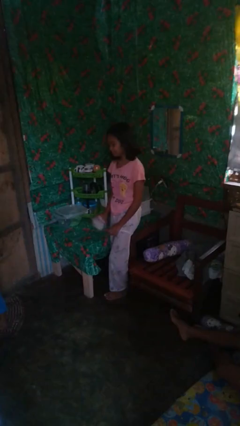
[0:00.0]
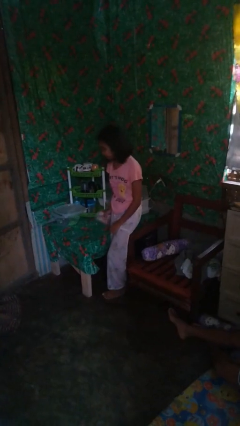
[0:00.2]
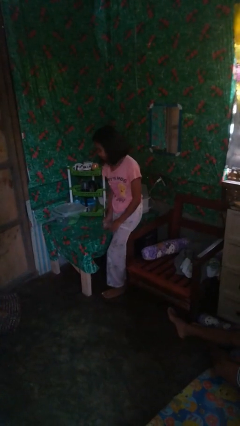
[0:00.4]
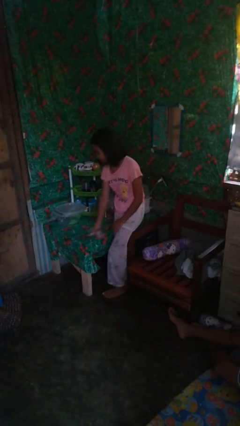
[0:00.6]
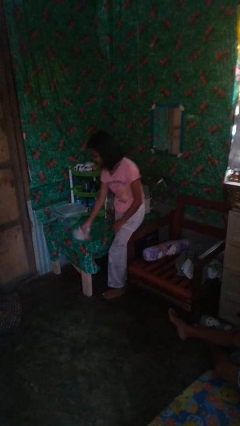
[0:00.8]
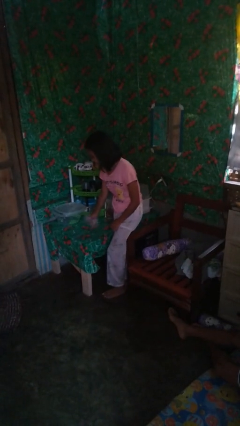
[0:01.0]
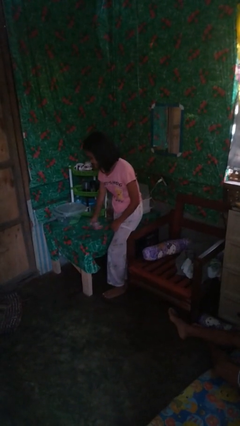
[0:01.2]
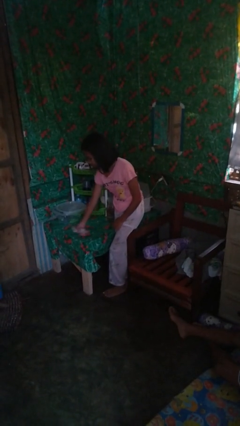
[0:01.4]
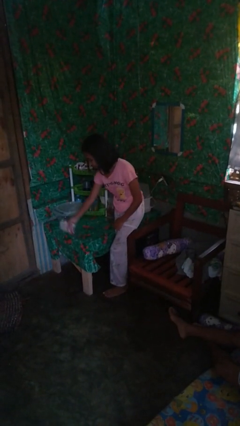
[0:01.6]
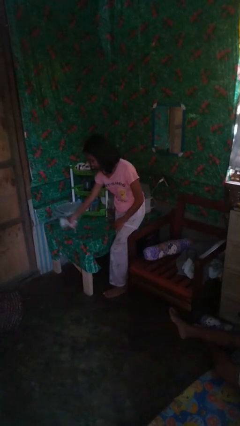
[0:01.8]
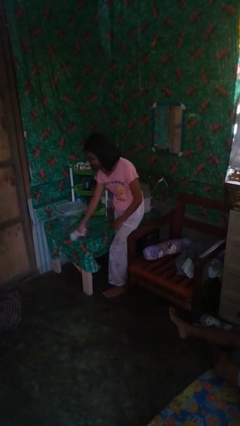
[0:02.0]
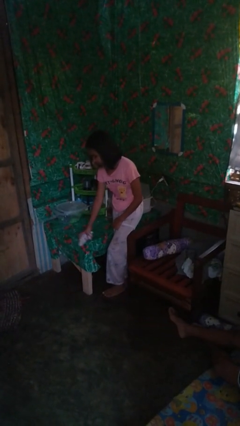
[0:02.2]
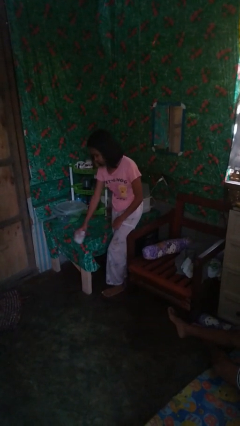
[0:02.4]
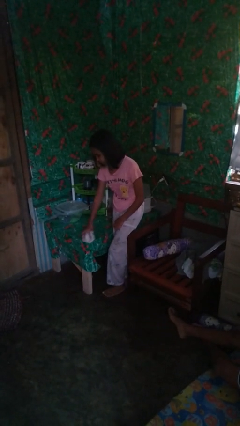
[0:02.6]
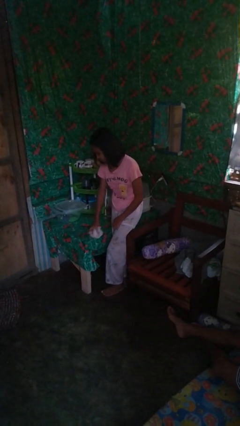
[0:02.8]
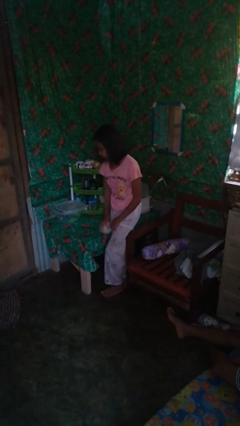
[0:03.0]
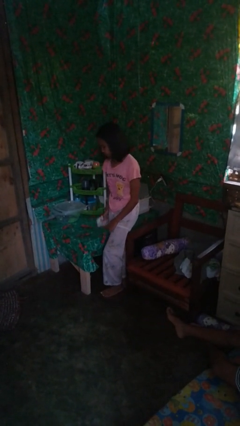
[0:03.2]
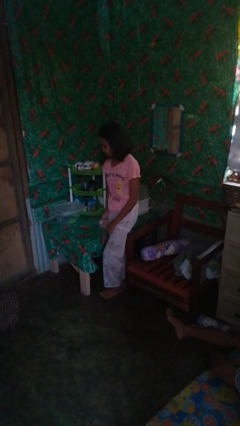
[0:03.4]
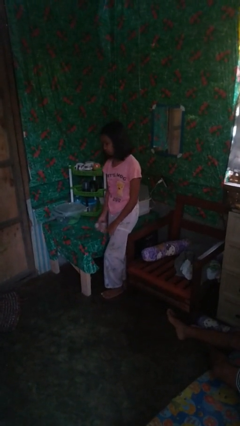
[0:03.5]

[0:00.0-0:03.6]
person cleans table with rag

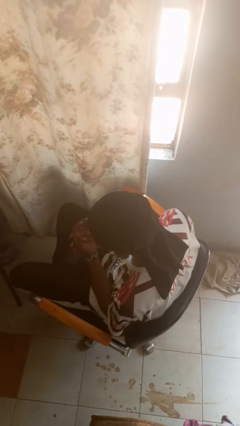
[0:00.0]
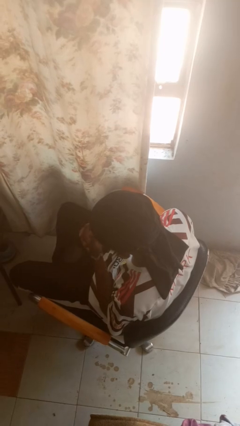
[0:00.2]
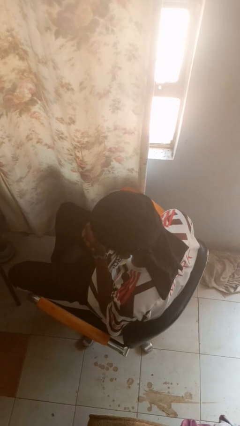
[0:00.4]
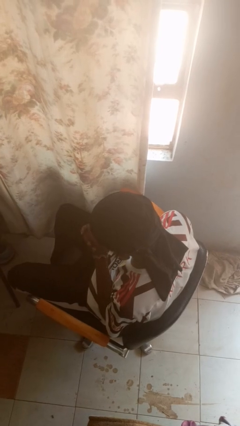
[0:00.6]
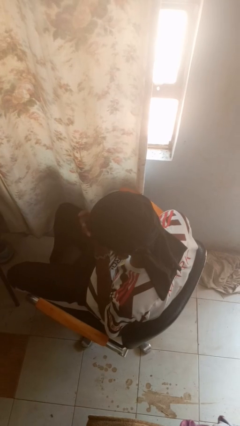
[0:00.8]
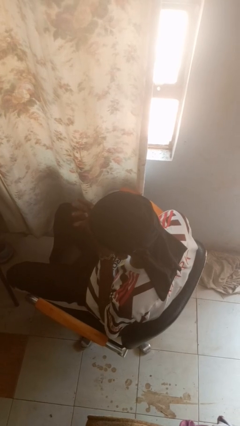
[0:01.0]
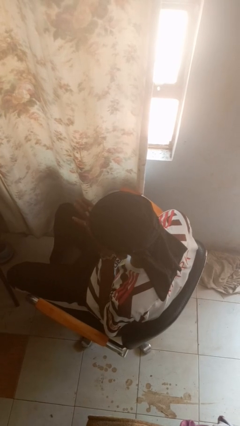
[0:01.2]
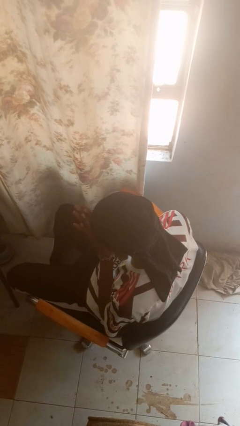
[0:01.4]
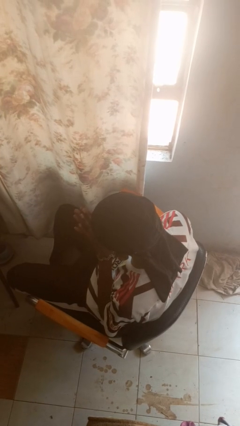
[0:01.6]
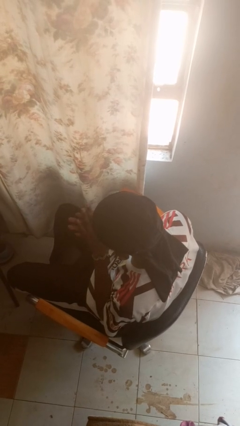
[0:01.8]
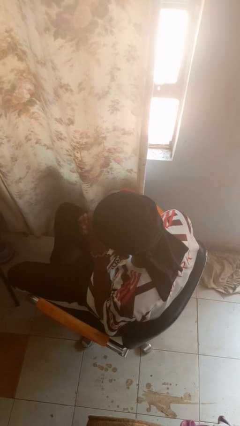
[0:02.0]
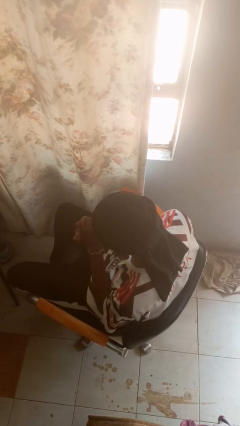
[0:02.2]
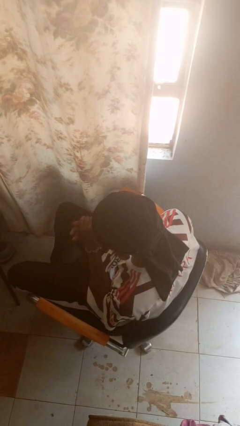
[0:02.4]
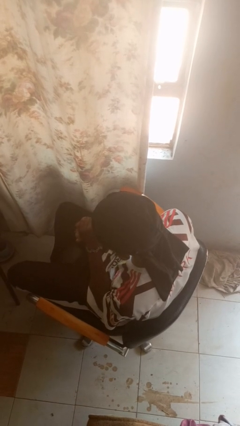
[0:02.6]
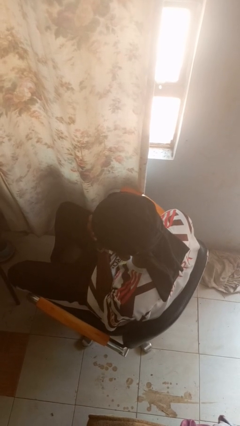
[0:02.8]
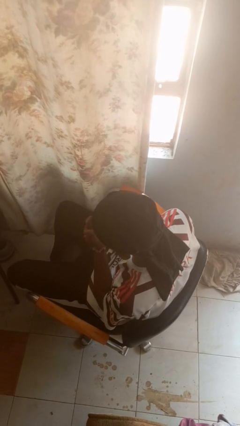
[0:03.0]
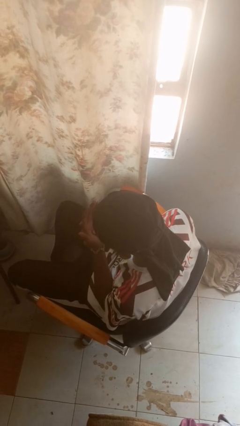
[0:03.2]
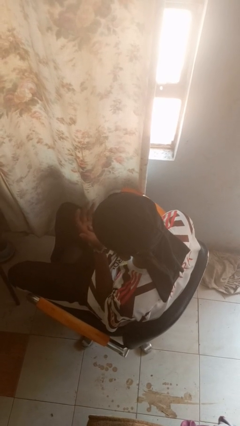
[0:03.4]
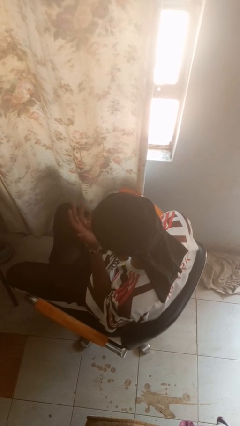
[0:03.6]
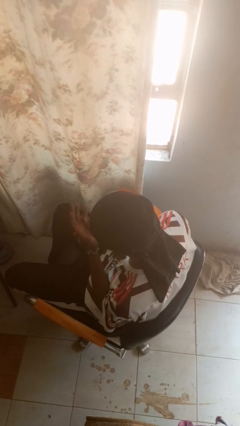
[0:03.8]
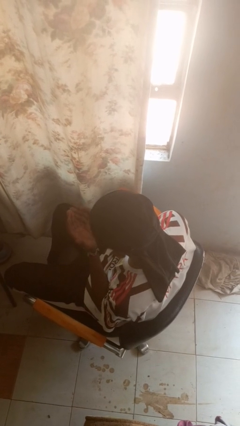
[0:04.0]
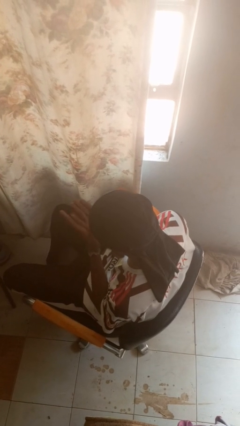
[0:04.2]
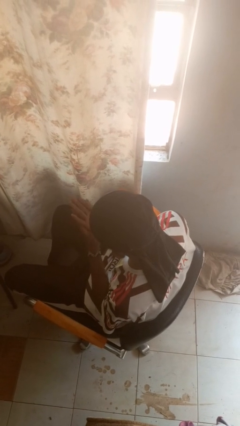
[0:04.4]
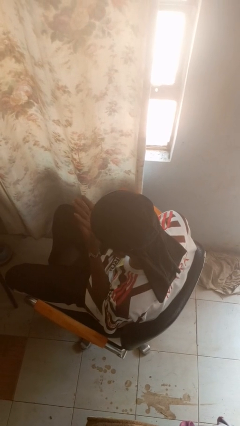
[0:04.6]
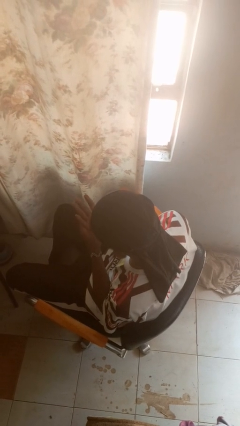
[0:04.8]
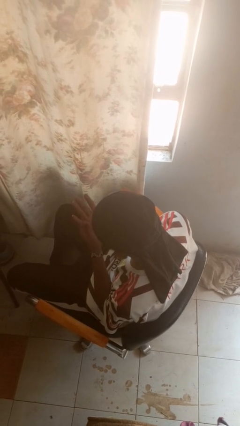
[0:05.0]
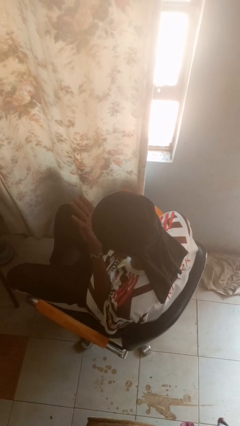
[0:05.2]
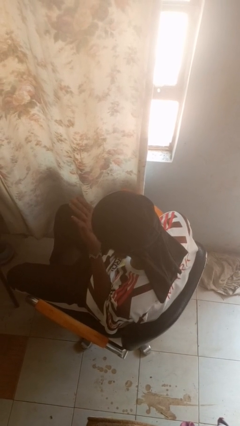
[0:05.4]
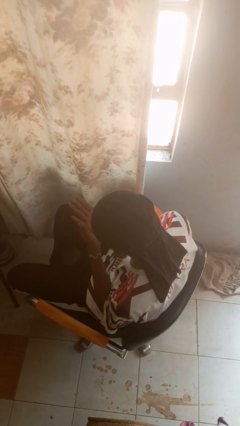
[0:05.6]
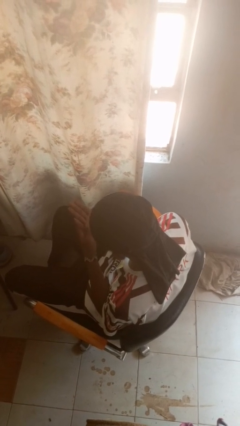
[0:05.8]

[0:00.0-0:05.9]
person looks at hands in lap

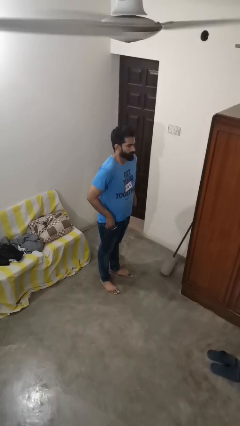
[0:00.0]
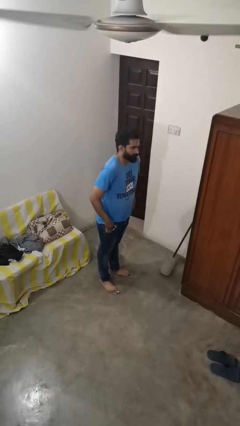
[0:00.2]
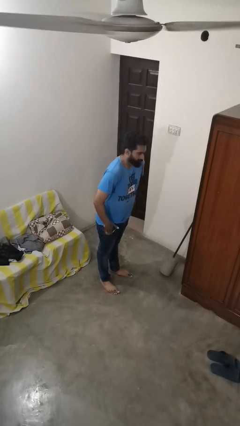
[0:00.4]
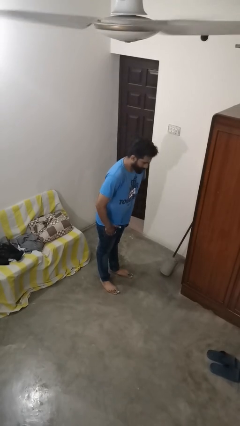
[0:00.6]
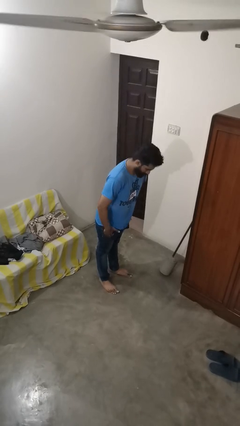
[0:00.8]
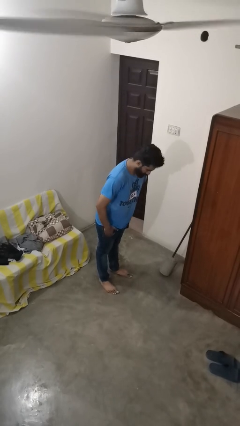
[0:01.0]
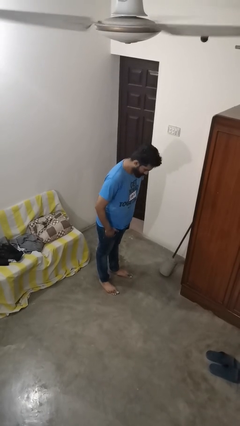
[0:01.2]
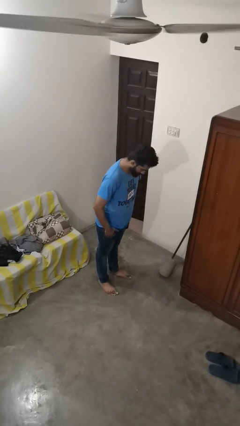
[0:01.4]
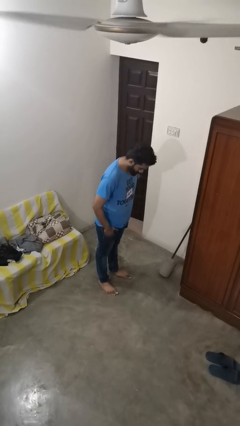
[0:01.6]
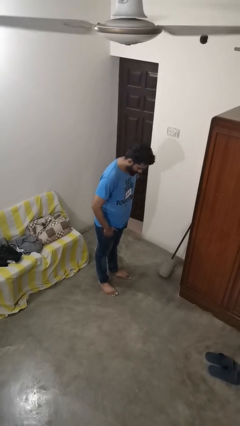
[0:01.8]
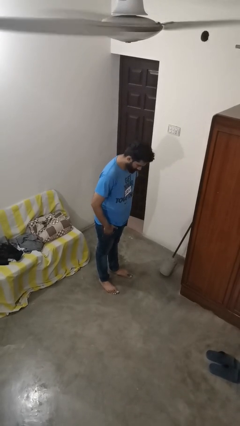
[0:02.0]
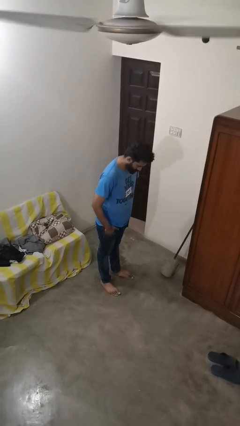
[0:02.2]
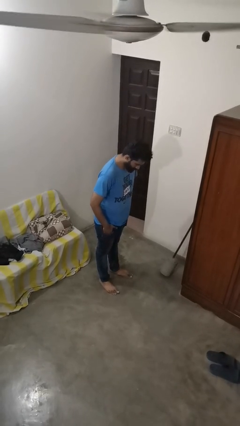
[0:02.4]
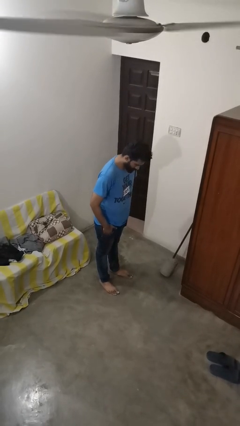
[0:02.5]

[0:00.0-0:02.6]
person puts hands in back pockets

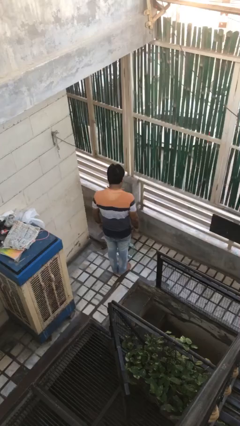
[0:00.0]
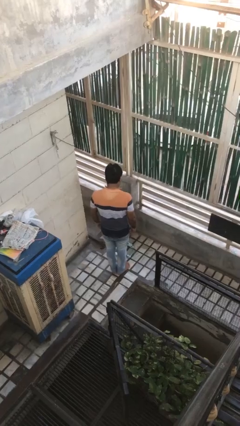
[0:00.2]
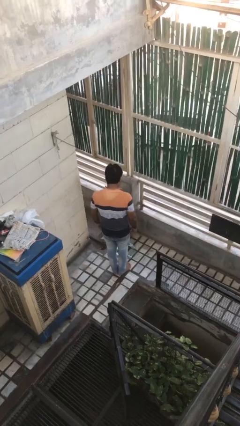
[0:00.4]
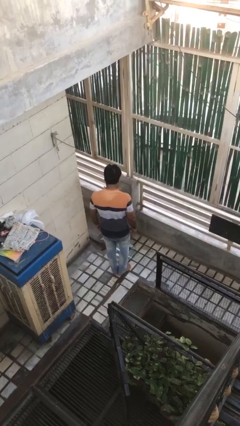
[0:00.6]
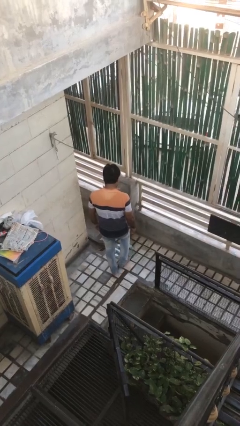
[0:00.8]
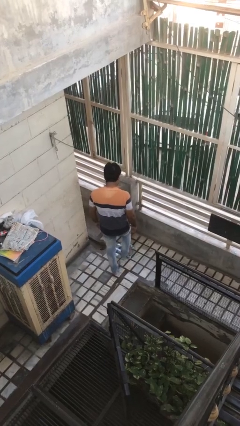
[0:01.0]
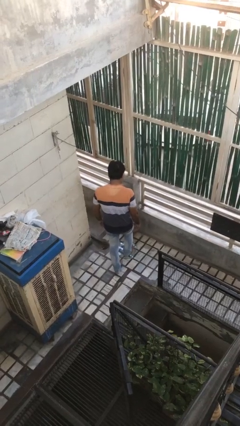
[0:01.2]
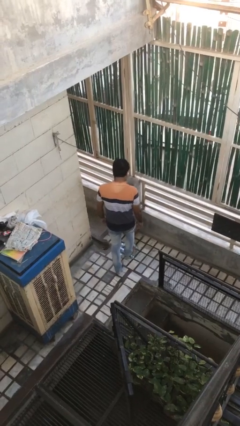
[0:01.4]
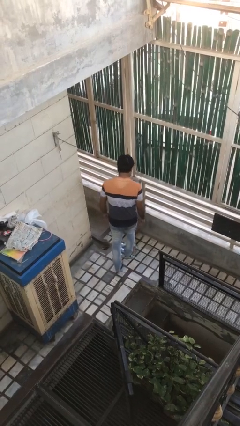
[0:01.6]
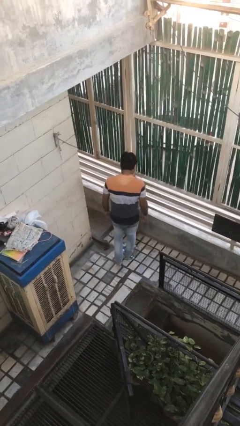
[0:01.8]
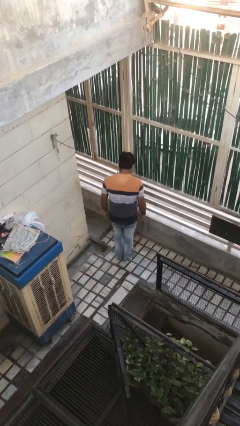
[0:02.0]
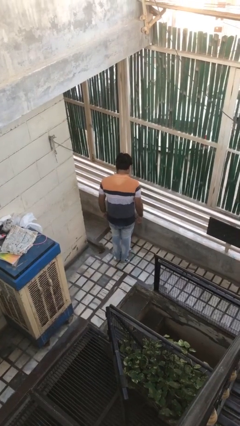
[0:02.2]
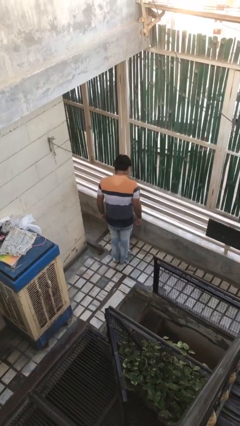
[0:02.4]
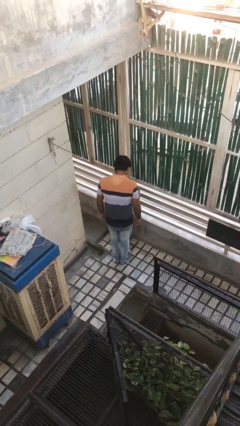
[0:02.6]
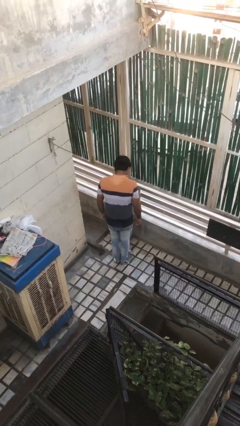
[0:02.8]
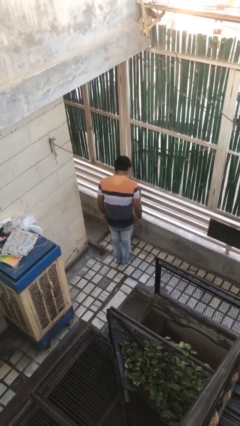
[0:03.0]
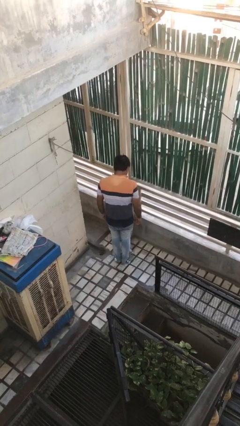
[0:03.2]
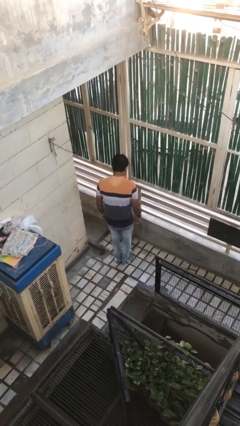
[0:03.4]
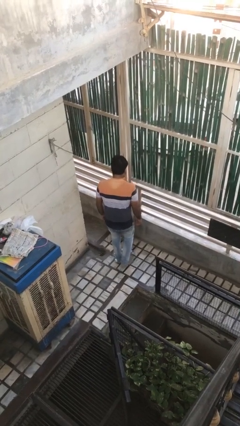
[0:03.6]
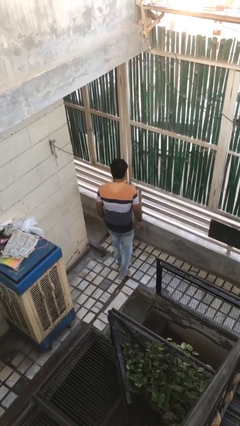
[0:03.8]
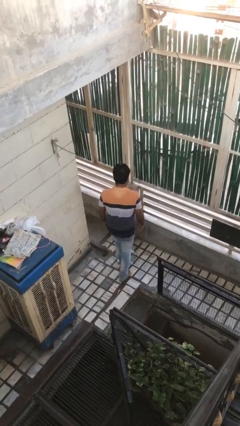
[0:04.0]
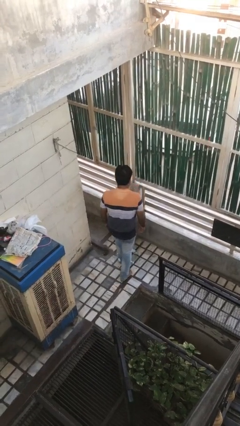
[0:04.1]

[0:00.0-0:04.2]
person uses bodyweight scale

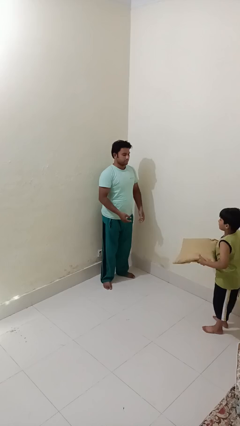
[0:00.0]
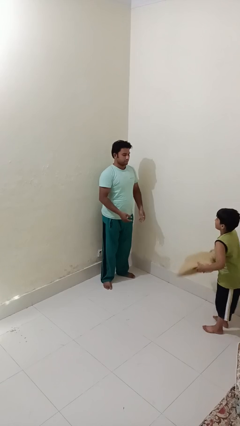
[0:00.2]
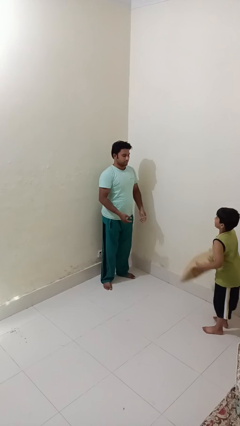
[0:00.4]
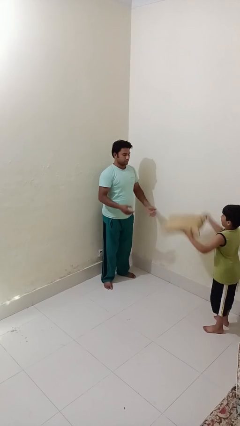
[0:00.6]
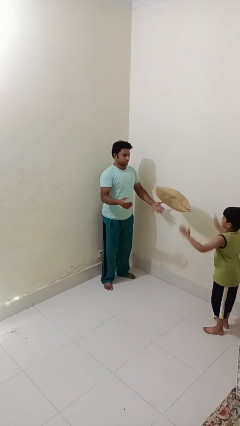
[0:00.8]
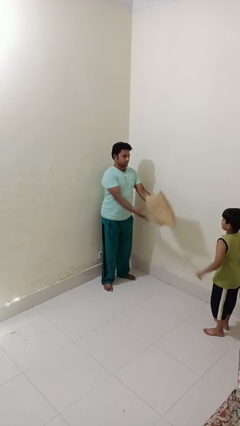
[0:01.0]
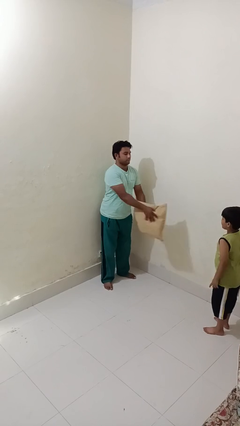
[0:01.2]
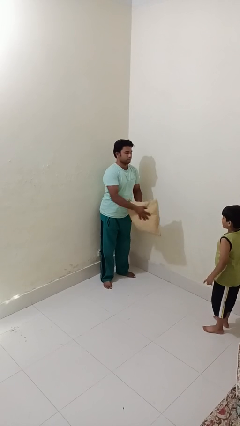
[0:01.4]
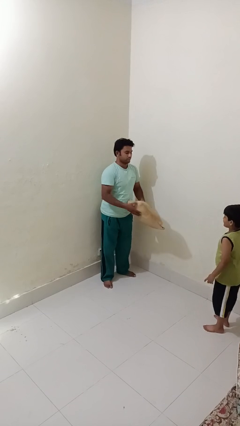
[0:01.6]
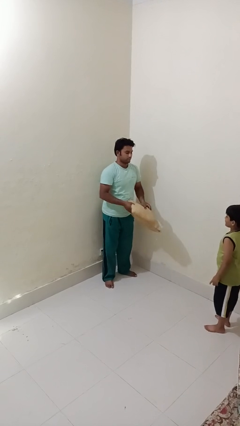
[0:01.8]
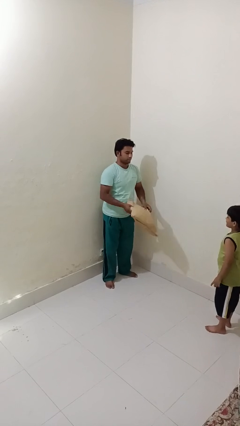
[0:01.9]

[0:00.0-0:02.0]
person catches object from person
